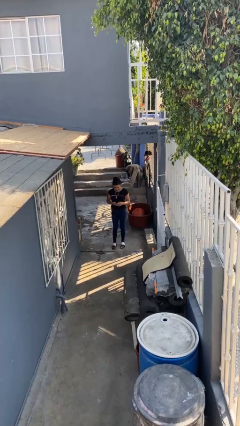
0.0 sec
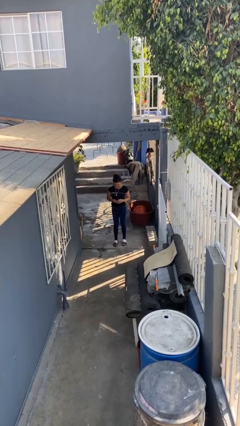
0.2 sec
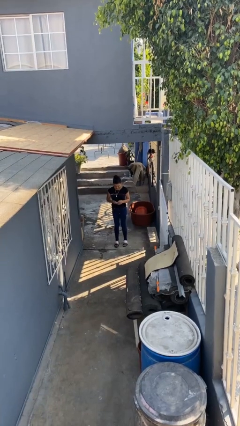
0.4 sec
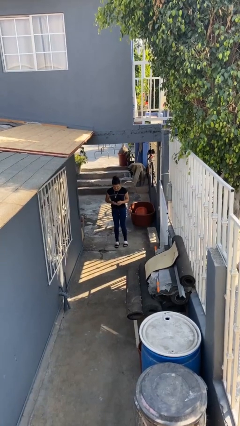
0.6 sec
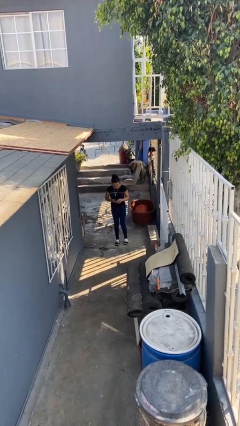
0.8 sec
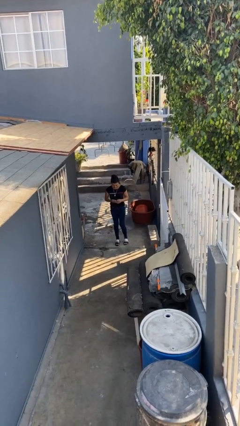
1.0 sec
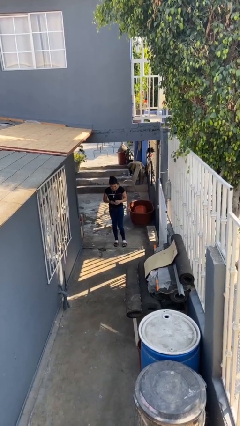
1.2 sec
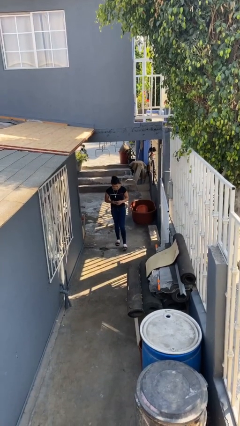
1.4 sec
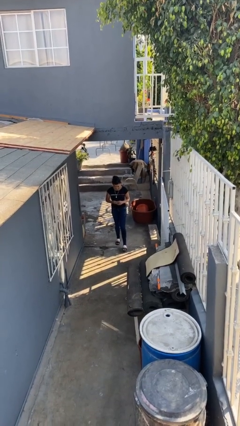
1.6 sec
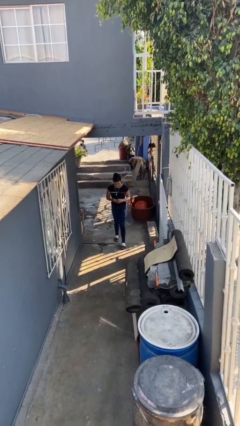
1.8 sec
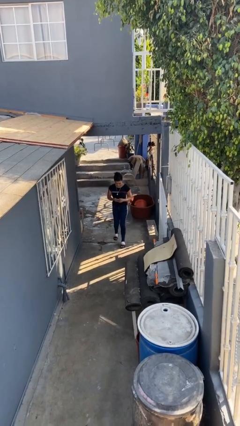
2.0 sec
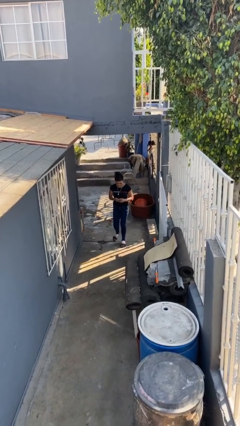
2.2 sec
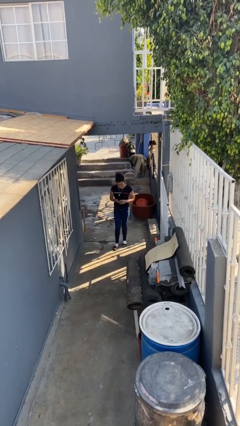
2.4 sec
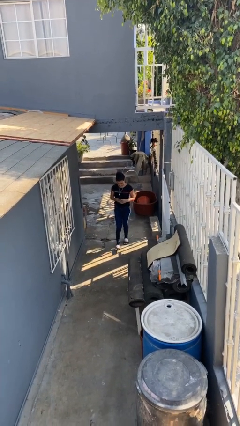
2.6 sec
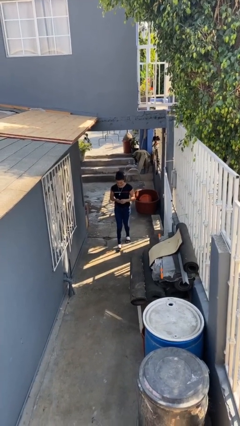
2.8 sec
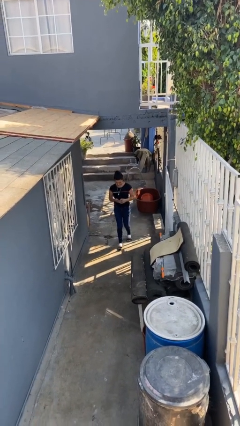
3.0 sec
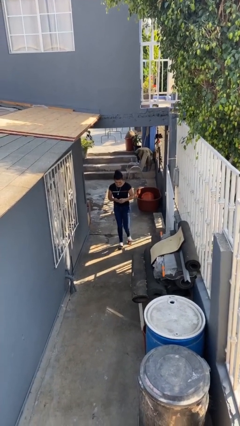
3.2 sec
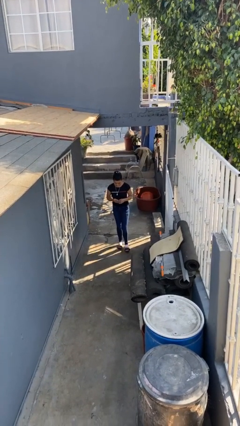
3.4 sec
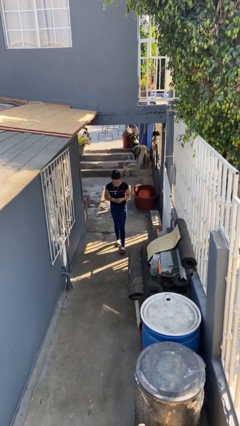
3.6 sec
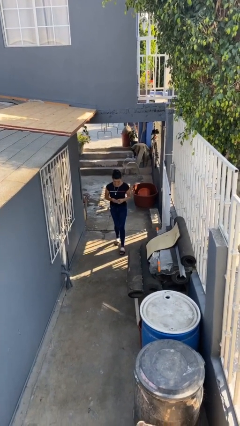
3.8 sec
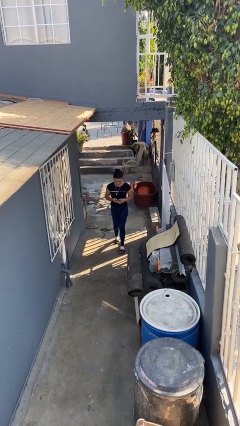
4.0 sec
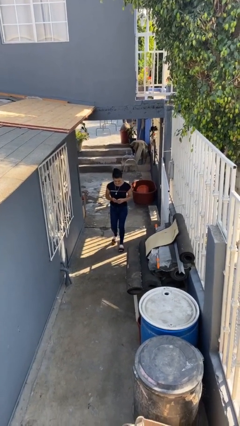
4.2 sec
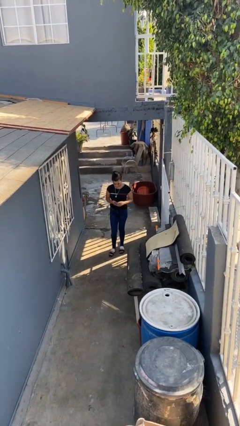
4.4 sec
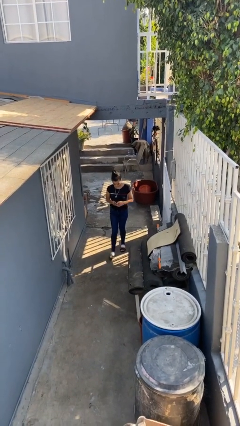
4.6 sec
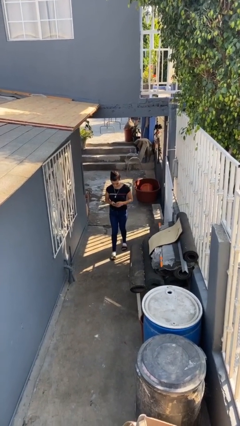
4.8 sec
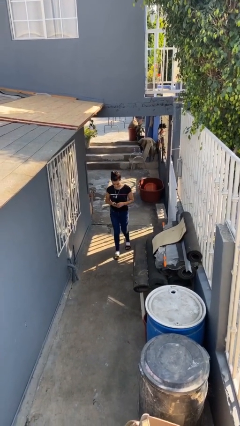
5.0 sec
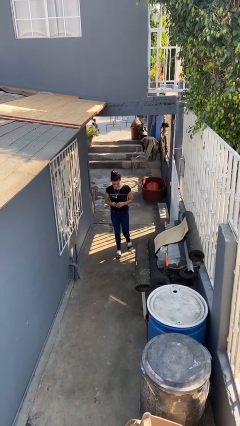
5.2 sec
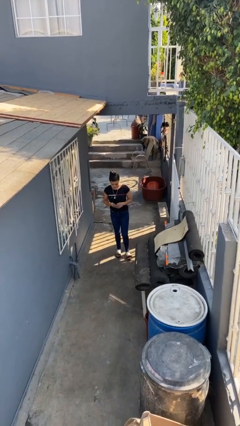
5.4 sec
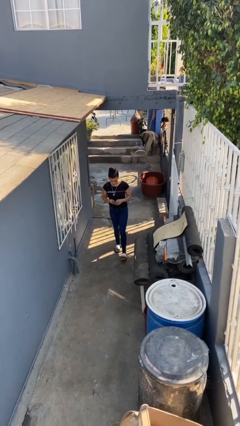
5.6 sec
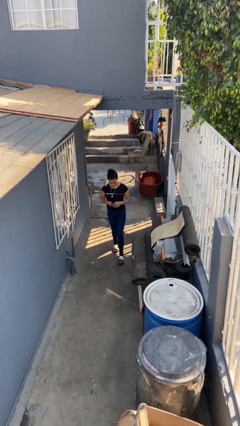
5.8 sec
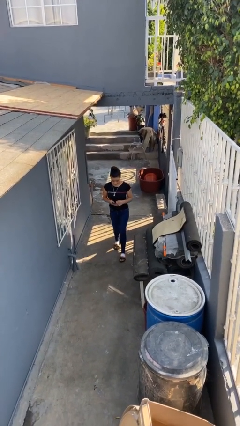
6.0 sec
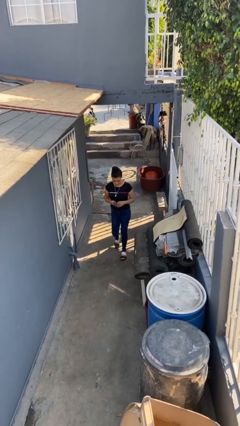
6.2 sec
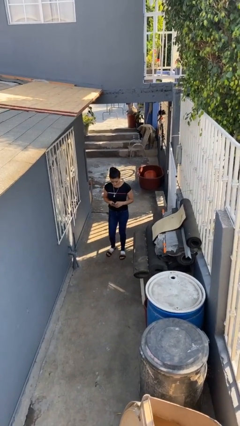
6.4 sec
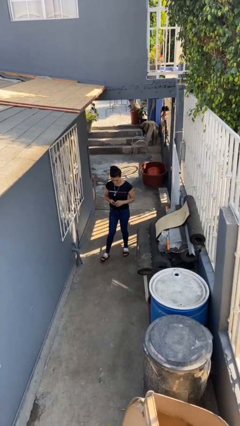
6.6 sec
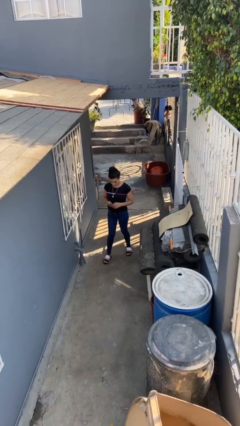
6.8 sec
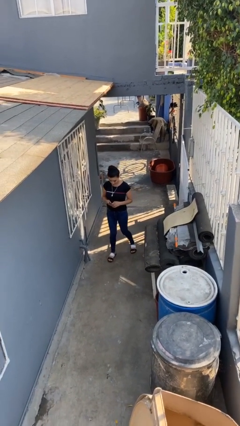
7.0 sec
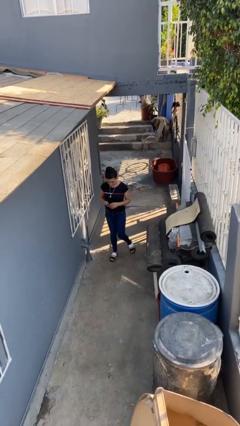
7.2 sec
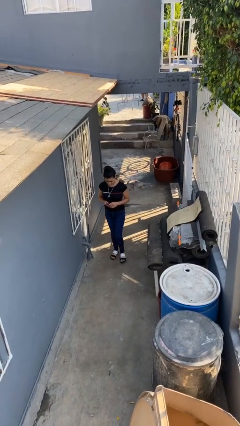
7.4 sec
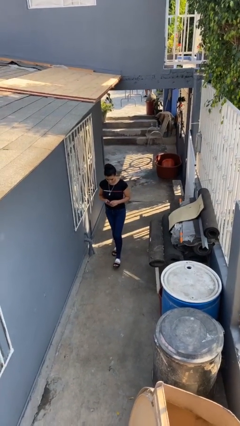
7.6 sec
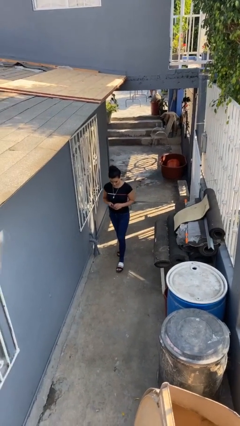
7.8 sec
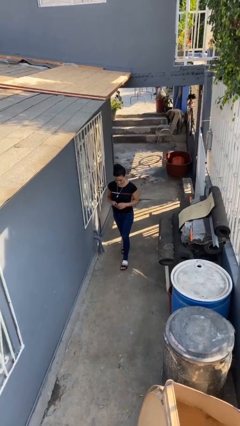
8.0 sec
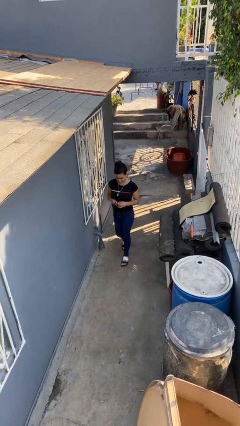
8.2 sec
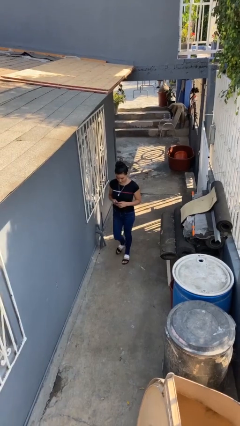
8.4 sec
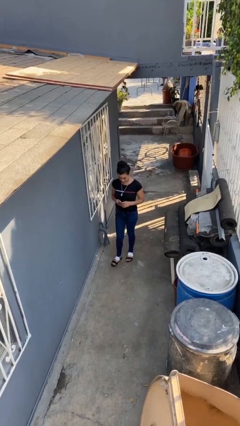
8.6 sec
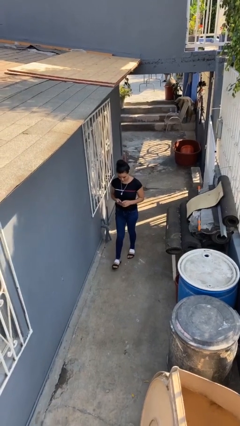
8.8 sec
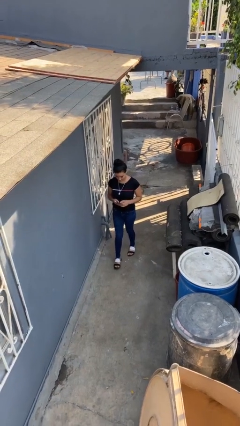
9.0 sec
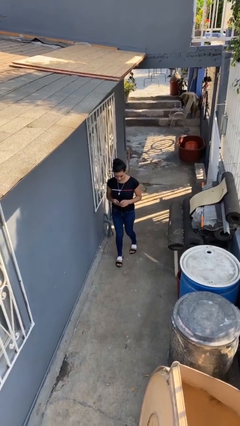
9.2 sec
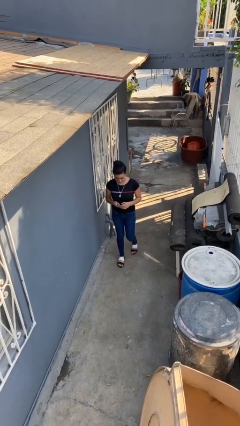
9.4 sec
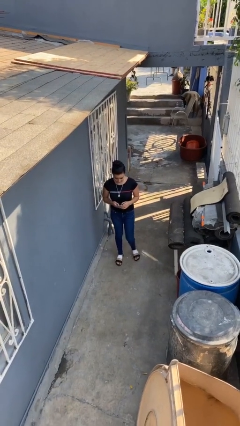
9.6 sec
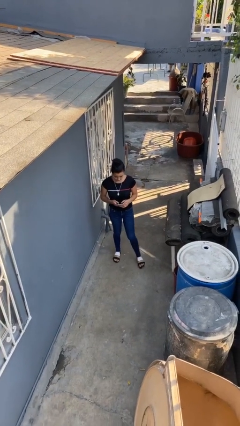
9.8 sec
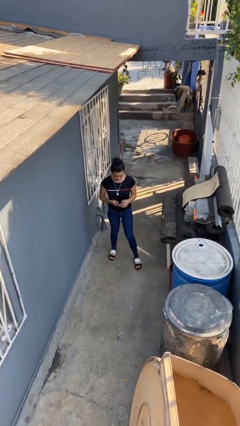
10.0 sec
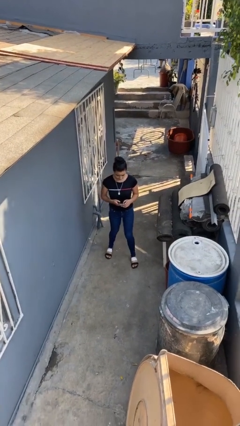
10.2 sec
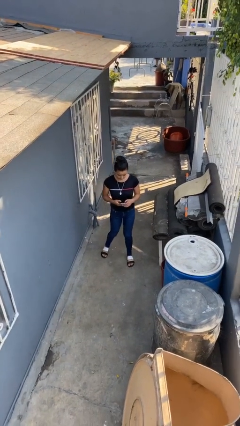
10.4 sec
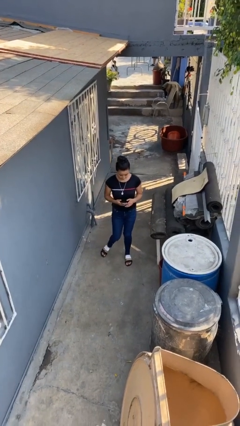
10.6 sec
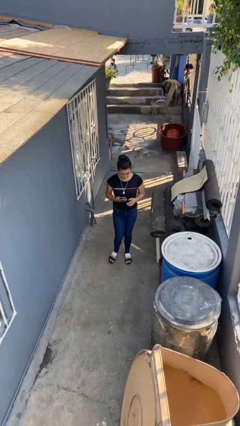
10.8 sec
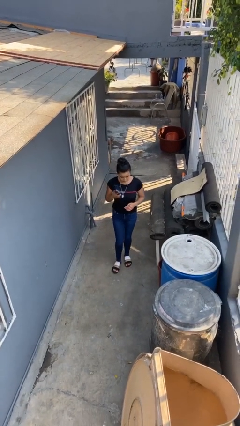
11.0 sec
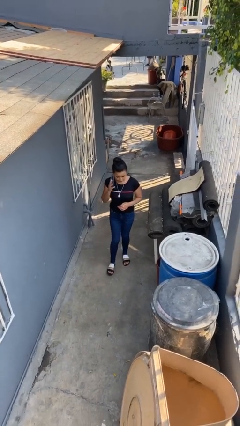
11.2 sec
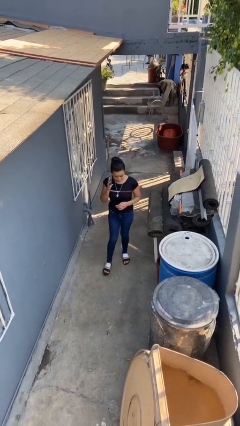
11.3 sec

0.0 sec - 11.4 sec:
person texts on phone

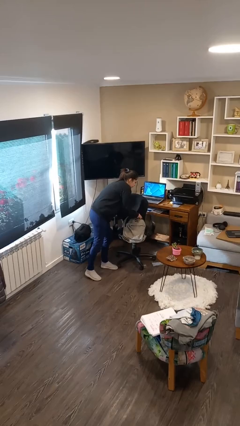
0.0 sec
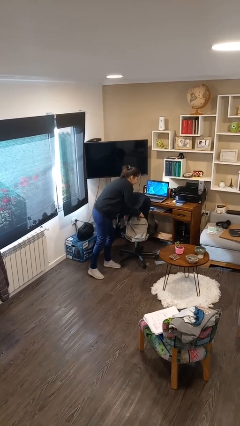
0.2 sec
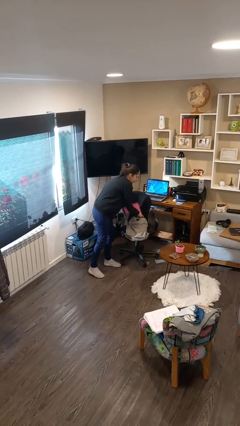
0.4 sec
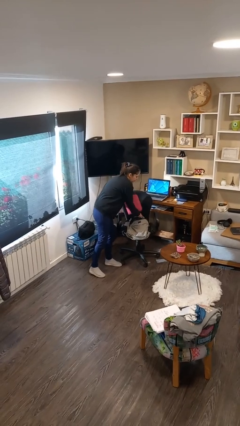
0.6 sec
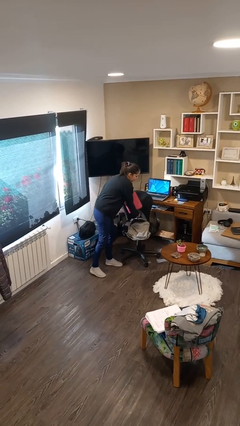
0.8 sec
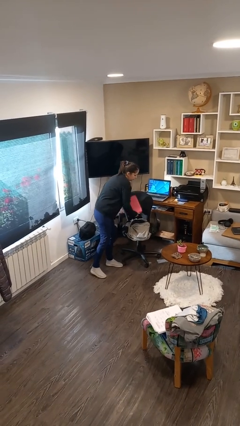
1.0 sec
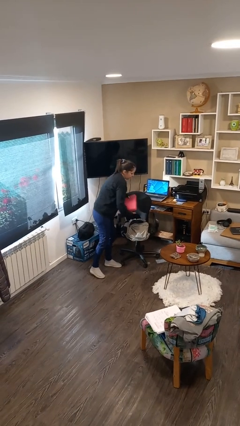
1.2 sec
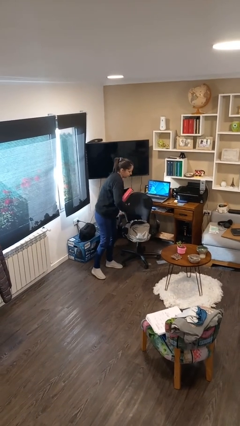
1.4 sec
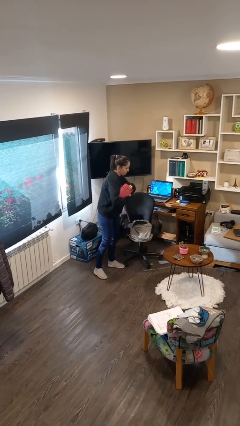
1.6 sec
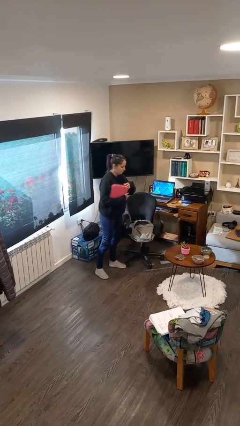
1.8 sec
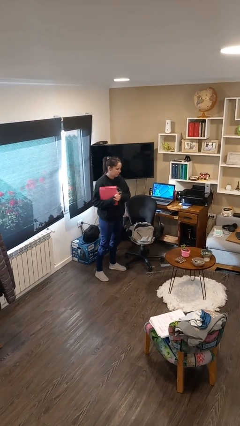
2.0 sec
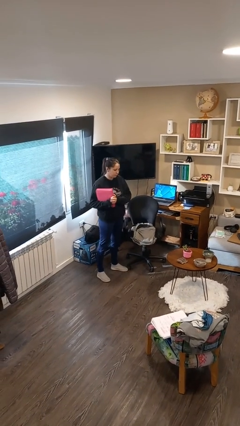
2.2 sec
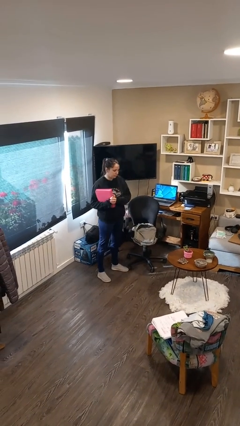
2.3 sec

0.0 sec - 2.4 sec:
person takes object from backpack

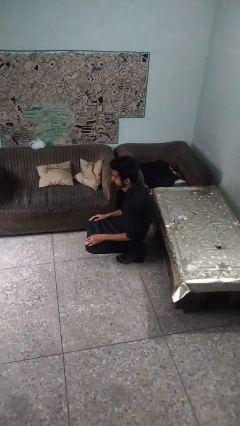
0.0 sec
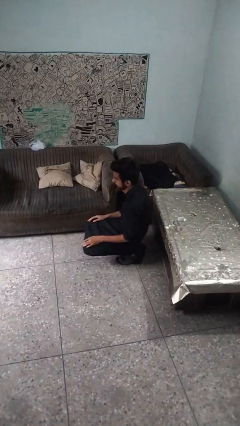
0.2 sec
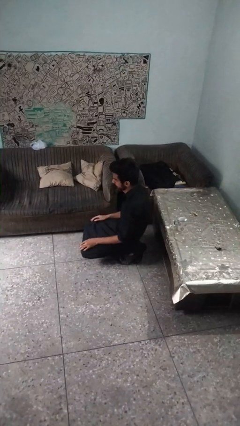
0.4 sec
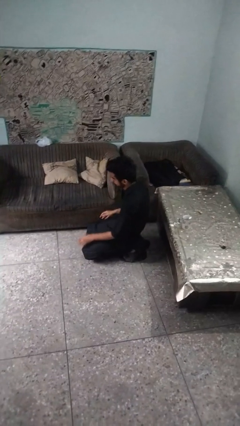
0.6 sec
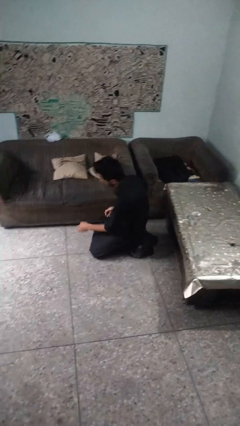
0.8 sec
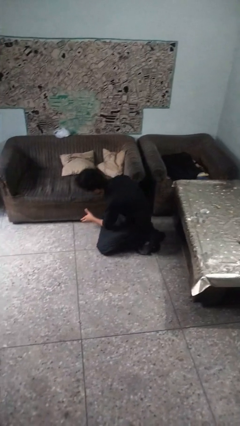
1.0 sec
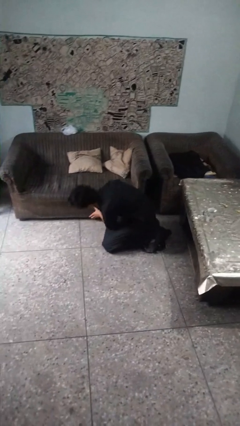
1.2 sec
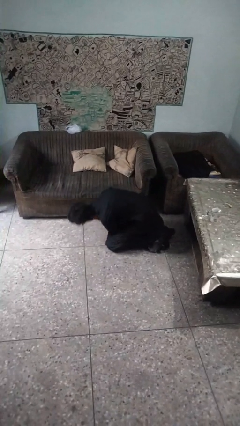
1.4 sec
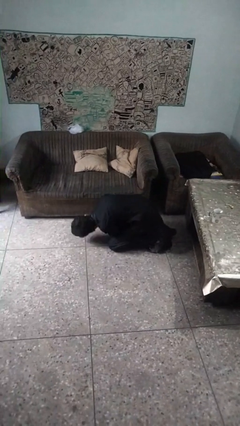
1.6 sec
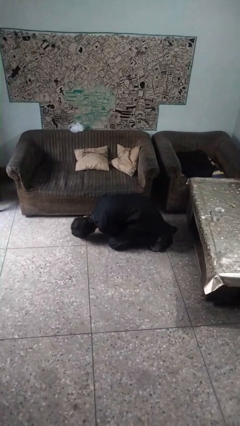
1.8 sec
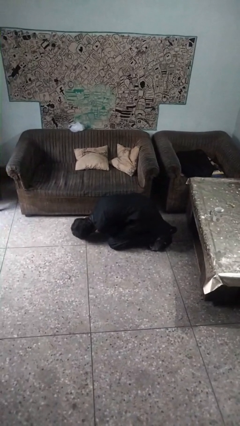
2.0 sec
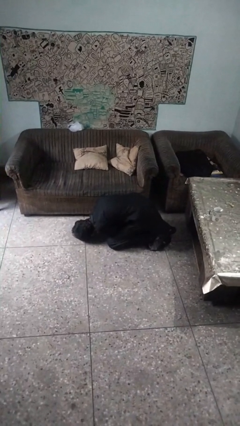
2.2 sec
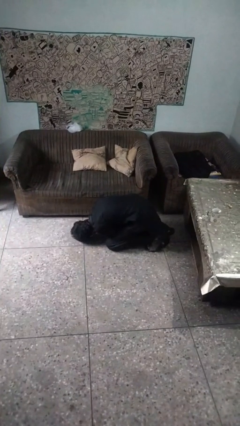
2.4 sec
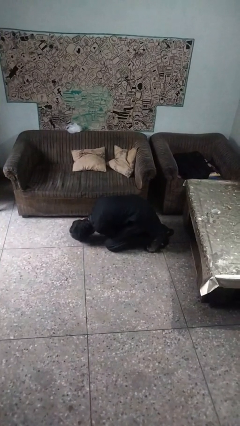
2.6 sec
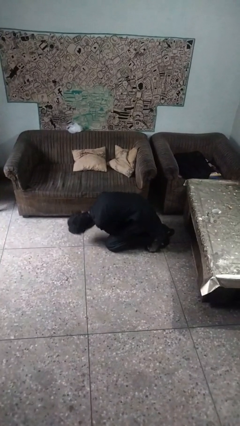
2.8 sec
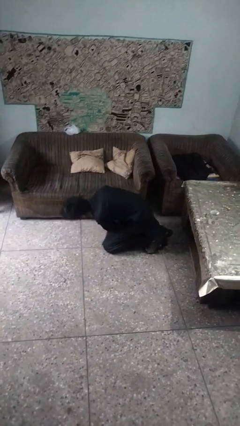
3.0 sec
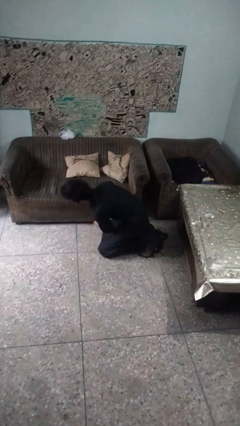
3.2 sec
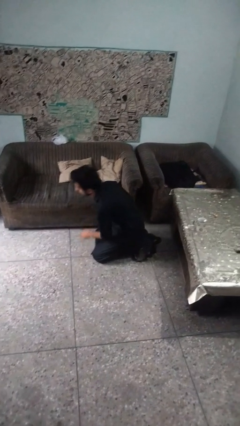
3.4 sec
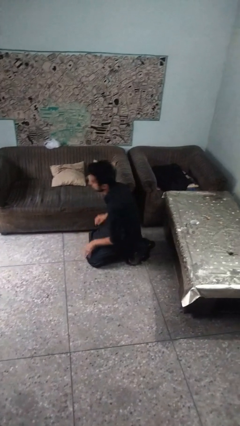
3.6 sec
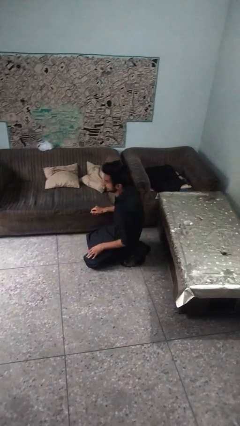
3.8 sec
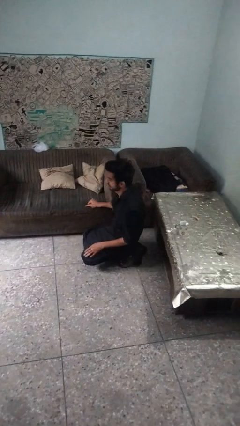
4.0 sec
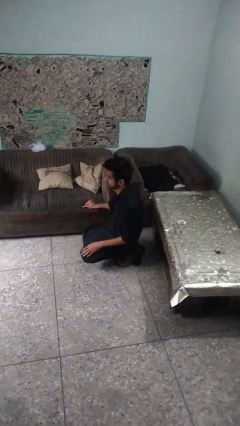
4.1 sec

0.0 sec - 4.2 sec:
person searches under couch
